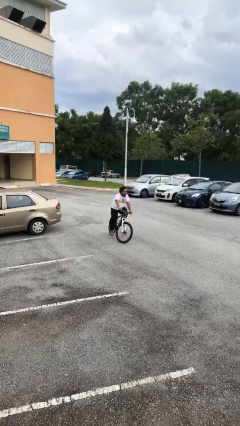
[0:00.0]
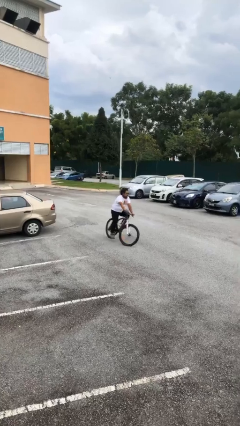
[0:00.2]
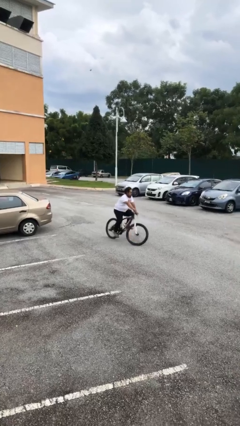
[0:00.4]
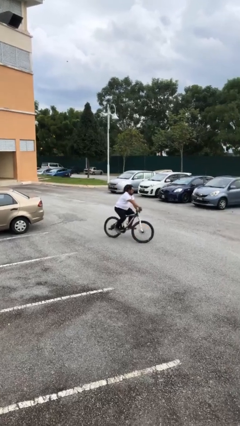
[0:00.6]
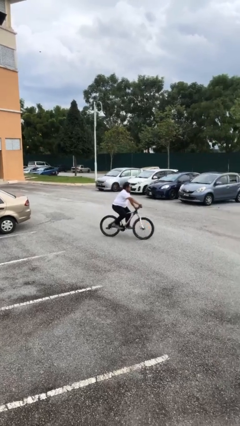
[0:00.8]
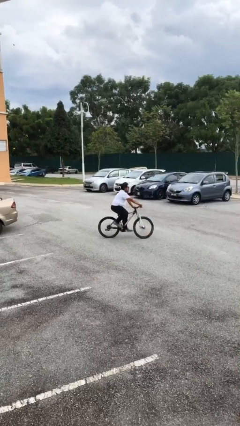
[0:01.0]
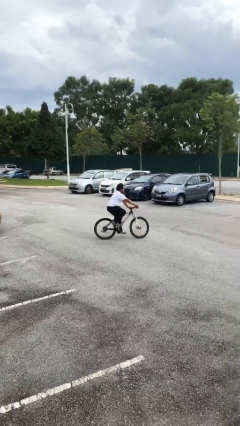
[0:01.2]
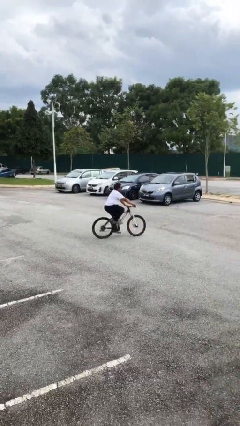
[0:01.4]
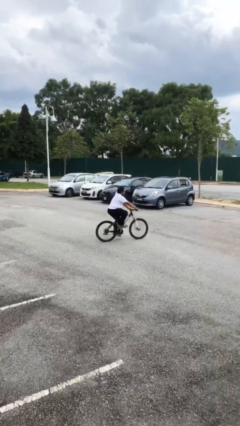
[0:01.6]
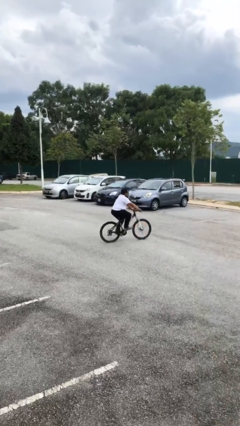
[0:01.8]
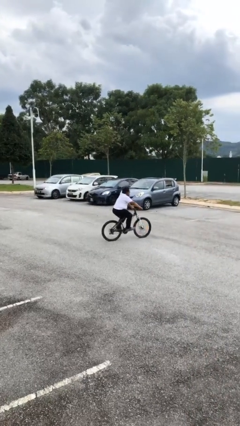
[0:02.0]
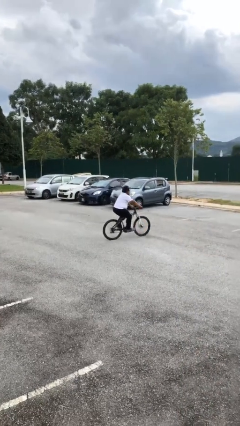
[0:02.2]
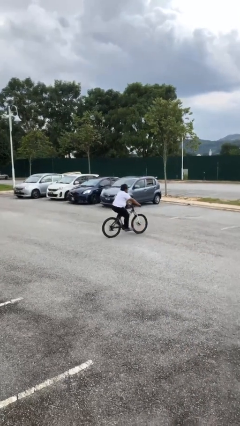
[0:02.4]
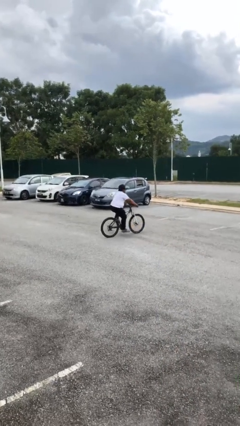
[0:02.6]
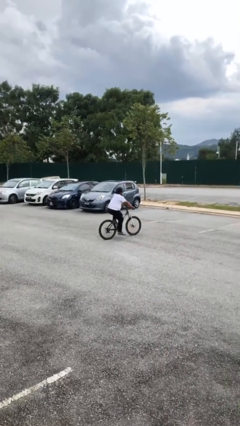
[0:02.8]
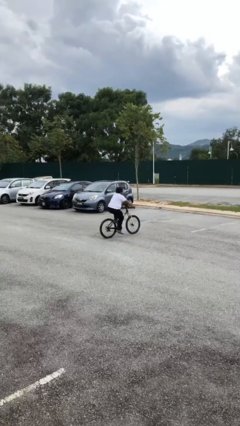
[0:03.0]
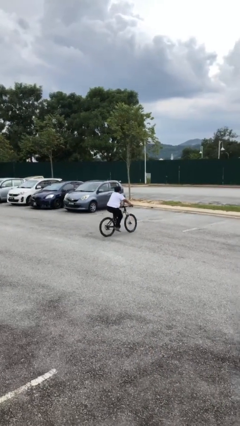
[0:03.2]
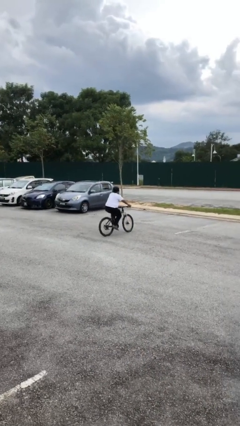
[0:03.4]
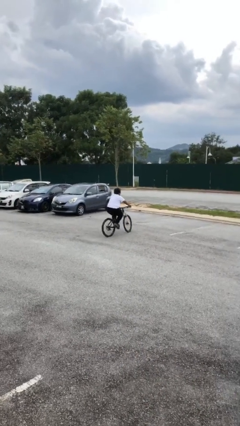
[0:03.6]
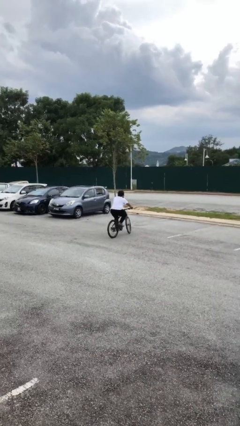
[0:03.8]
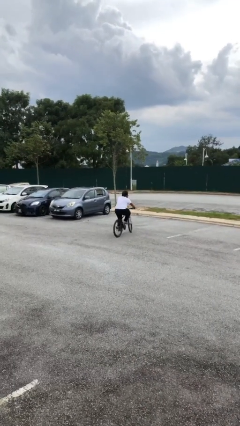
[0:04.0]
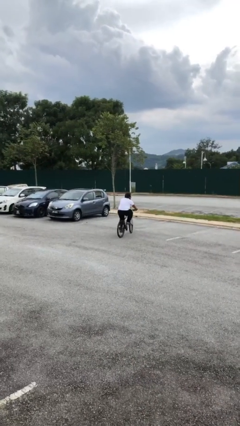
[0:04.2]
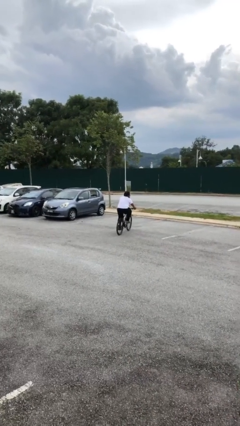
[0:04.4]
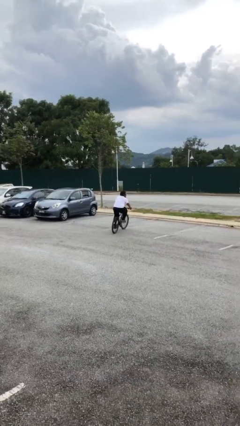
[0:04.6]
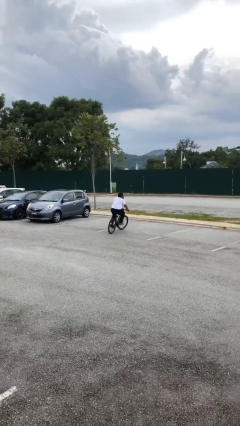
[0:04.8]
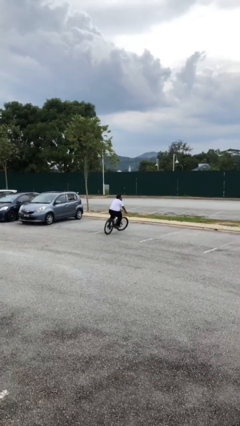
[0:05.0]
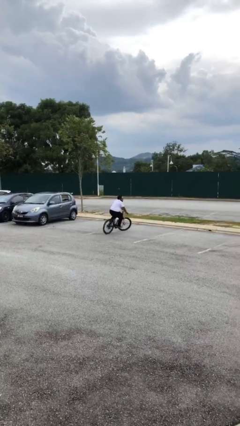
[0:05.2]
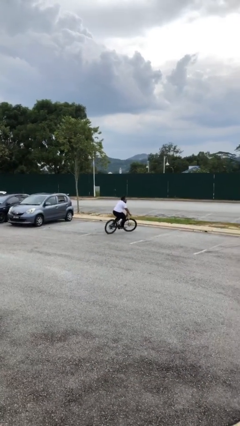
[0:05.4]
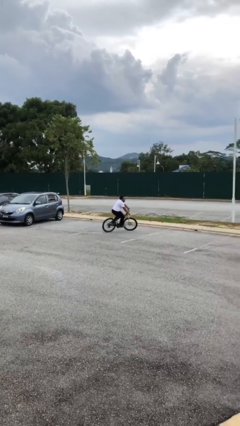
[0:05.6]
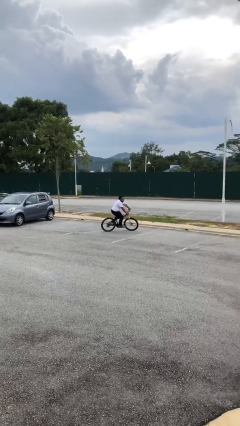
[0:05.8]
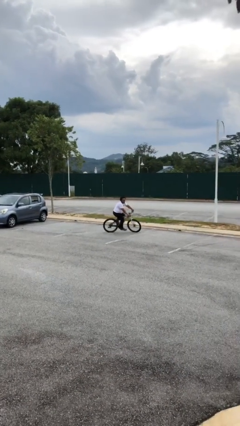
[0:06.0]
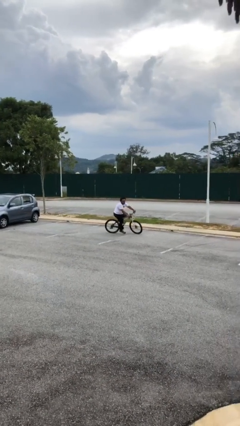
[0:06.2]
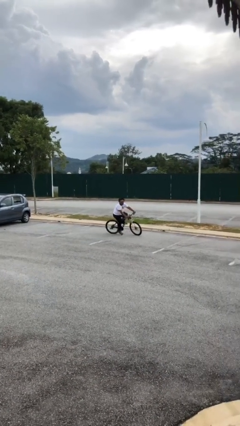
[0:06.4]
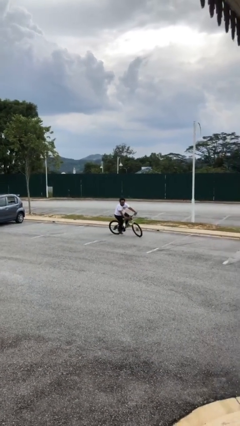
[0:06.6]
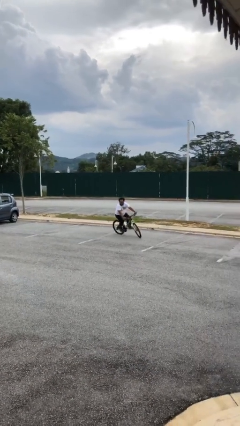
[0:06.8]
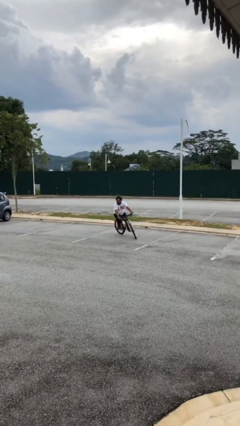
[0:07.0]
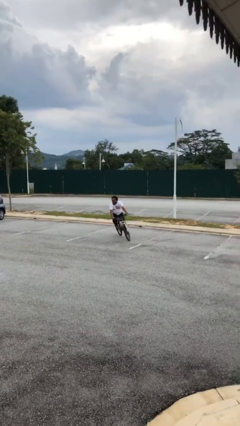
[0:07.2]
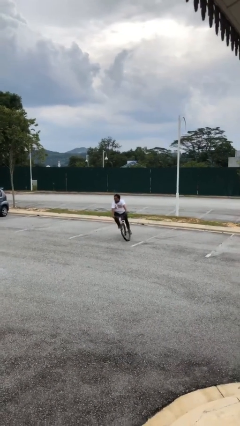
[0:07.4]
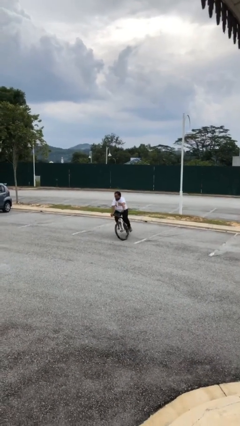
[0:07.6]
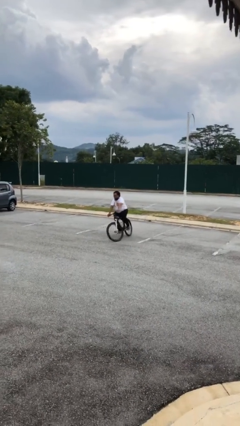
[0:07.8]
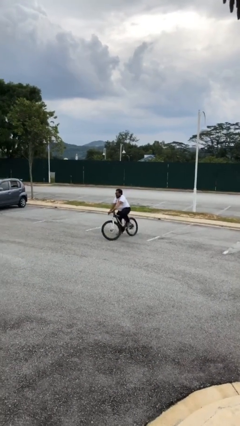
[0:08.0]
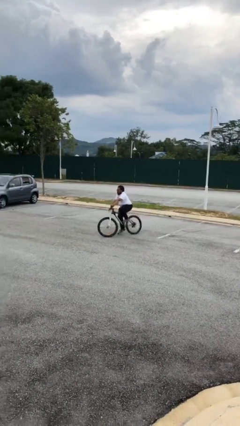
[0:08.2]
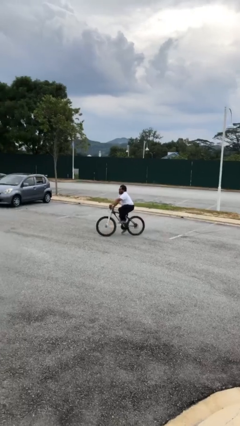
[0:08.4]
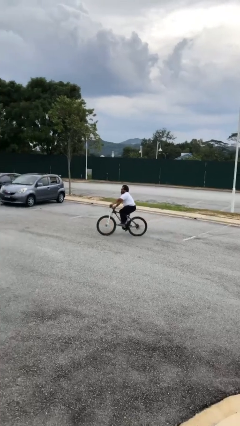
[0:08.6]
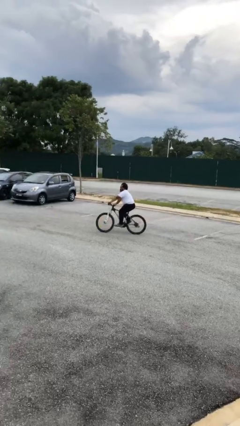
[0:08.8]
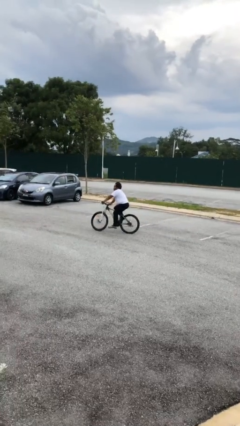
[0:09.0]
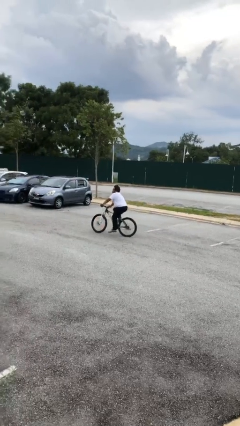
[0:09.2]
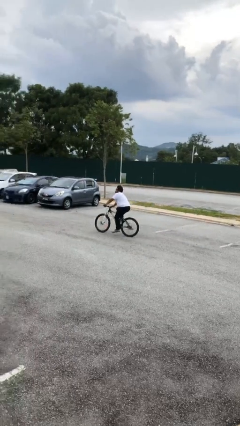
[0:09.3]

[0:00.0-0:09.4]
person rides bicycle

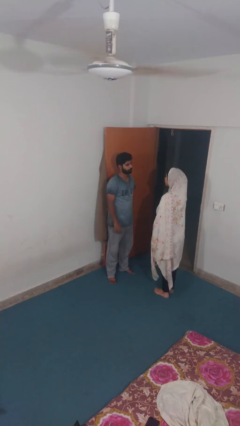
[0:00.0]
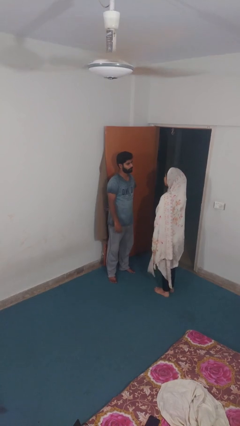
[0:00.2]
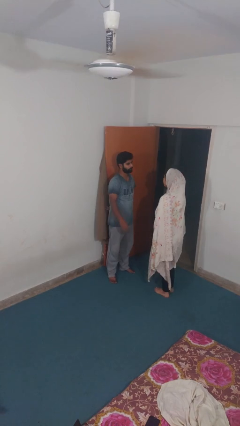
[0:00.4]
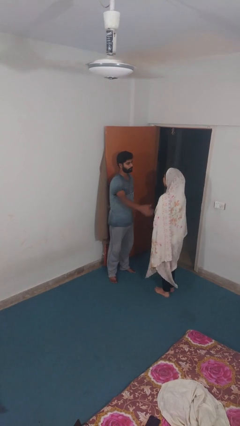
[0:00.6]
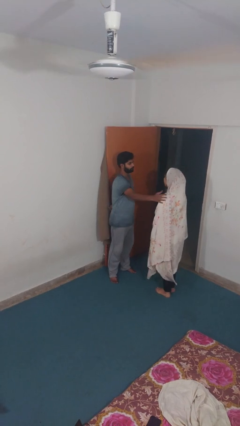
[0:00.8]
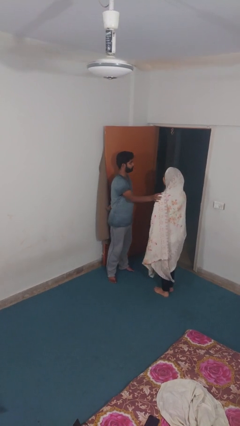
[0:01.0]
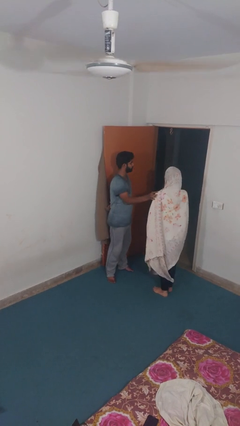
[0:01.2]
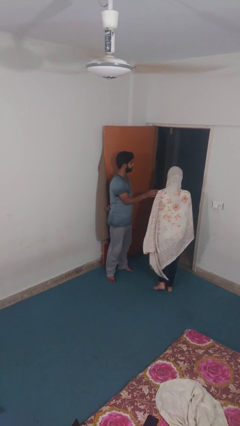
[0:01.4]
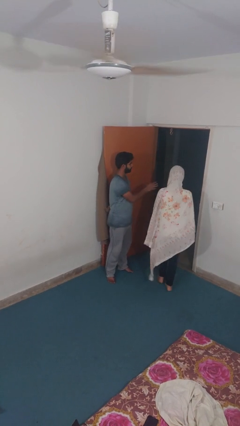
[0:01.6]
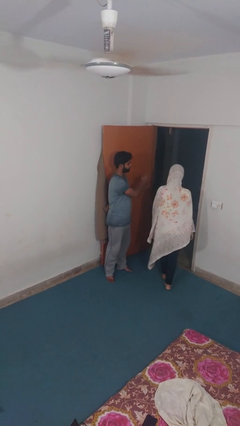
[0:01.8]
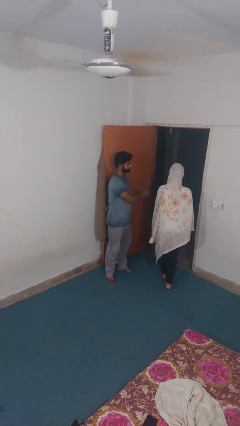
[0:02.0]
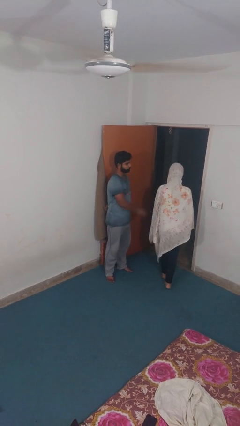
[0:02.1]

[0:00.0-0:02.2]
person shoves person

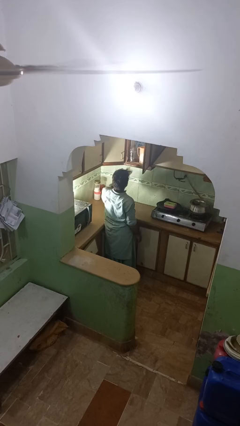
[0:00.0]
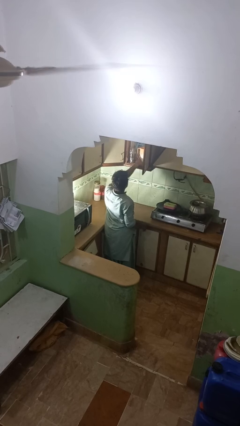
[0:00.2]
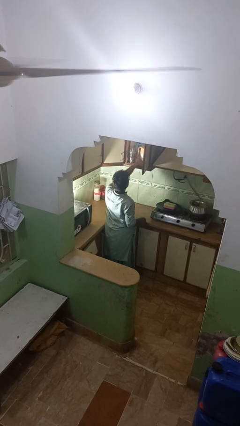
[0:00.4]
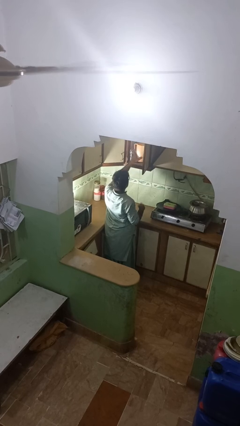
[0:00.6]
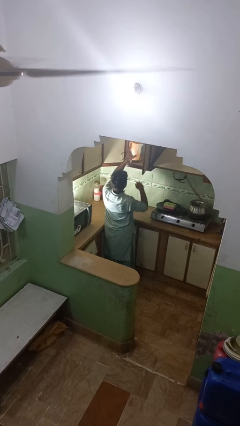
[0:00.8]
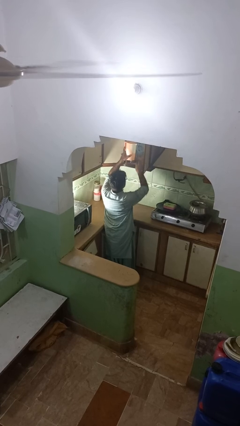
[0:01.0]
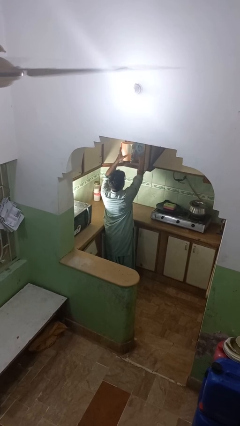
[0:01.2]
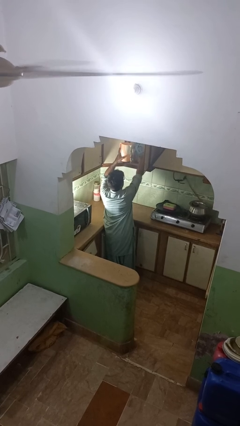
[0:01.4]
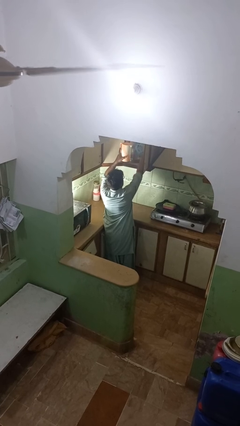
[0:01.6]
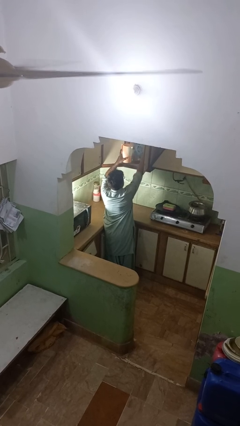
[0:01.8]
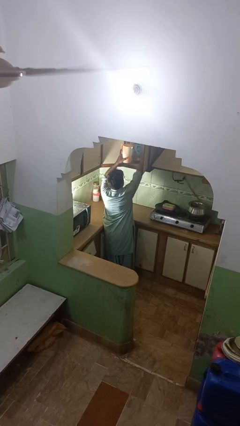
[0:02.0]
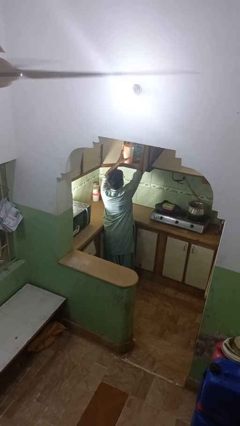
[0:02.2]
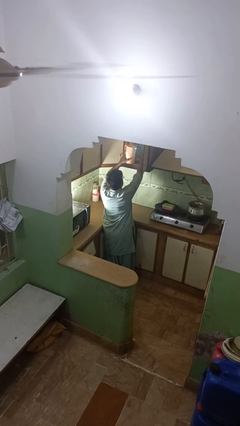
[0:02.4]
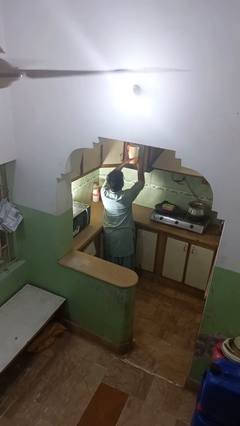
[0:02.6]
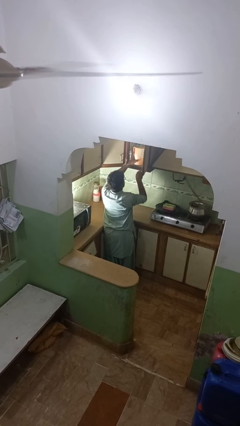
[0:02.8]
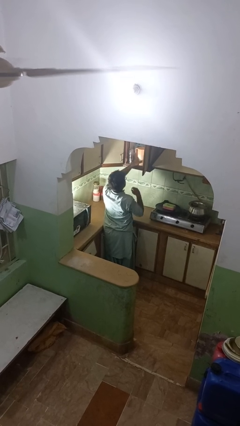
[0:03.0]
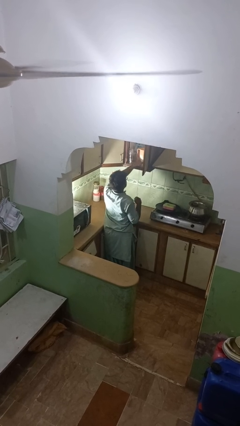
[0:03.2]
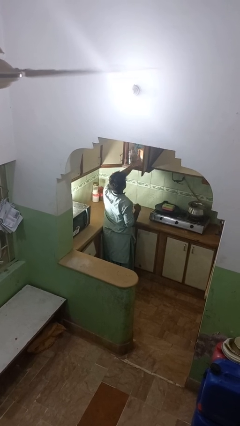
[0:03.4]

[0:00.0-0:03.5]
person searches in kitchen drawer

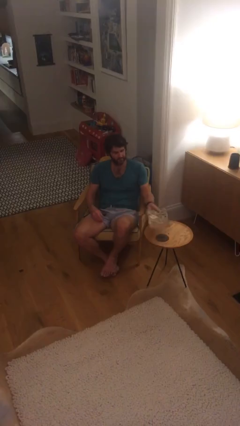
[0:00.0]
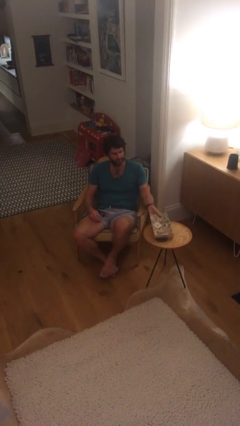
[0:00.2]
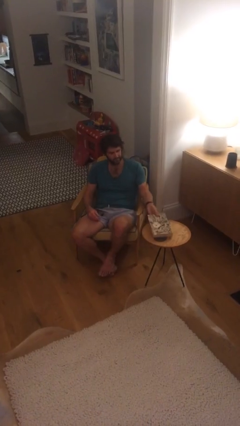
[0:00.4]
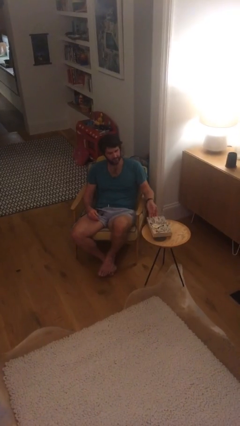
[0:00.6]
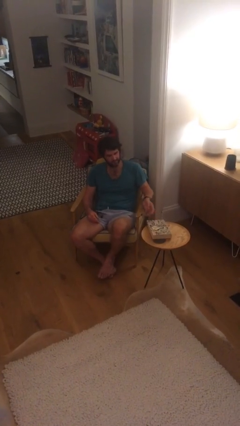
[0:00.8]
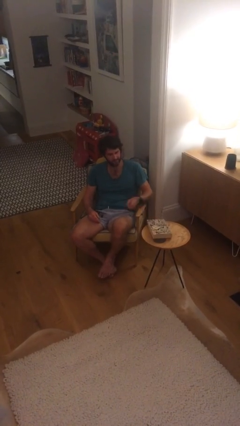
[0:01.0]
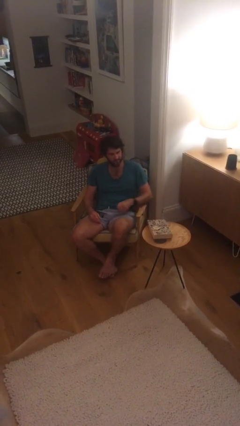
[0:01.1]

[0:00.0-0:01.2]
person puts down object on table

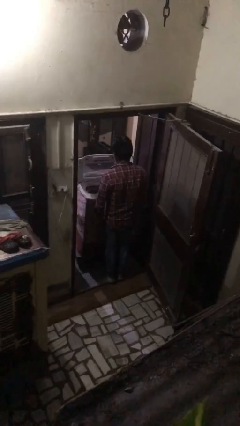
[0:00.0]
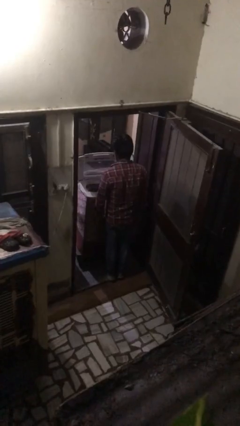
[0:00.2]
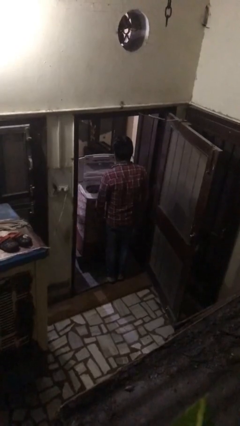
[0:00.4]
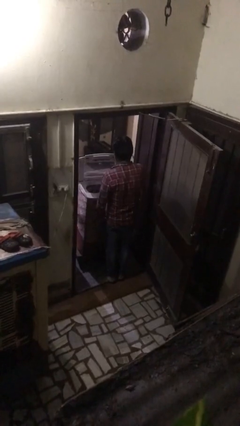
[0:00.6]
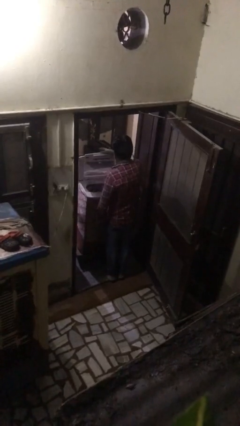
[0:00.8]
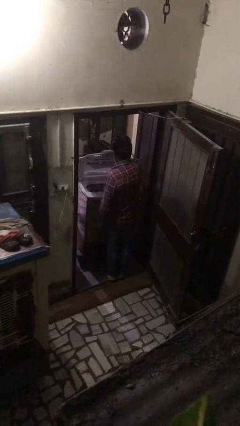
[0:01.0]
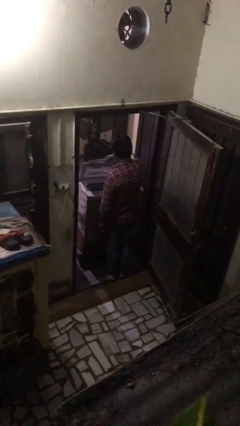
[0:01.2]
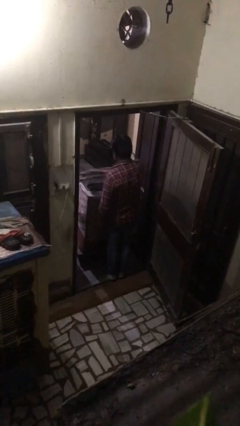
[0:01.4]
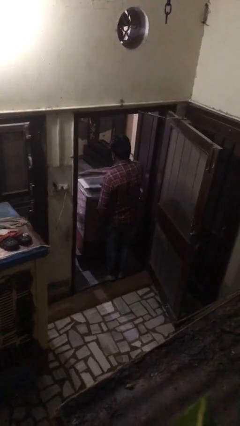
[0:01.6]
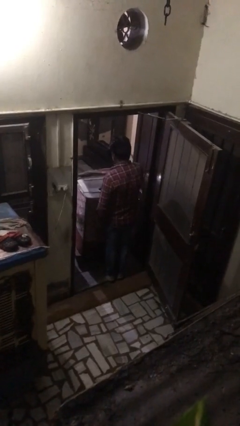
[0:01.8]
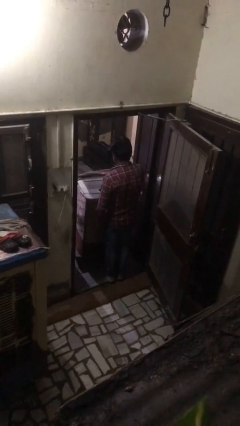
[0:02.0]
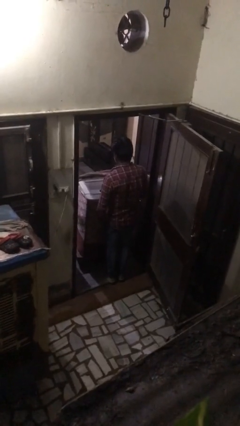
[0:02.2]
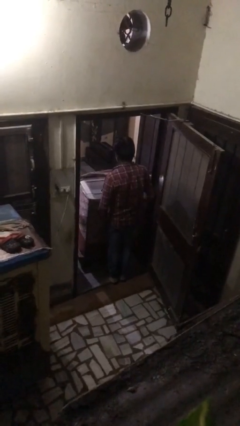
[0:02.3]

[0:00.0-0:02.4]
person closes clothes washer
